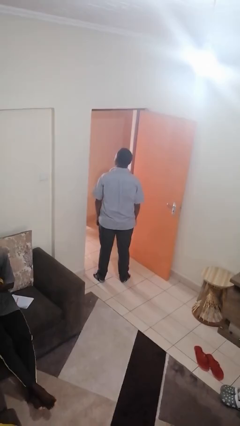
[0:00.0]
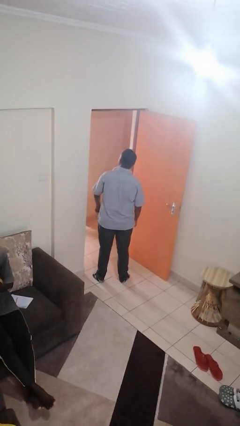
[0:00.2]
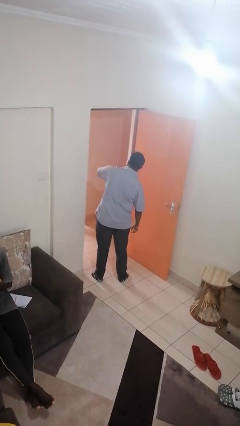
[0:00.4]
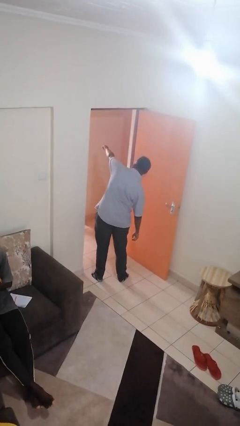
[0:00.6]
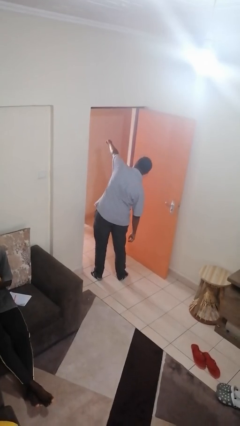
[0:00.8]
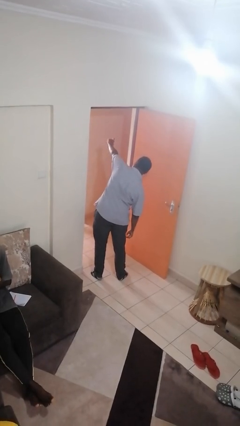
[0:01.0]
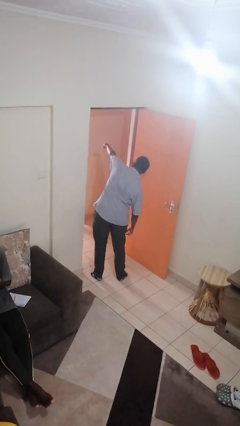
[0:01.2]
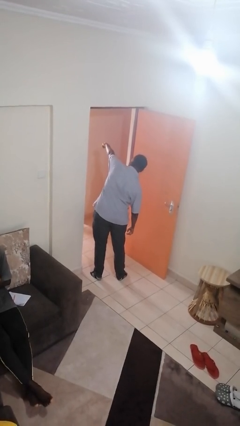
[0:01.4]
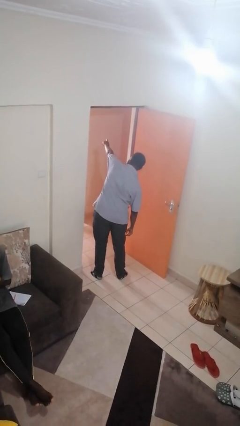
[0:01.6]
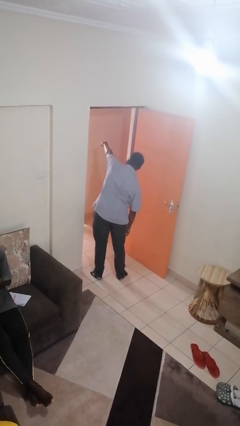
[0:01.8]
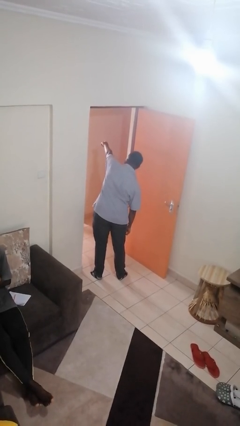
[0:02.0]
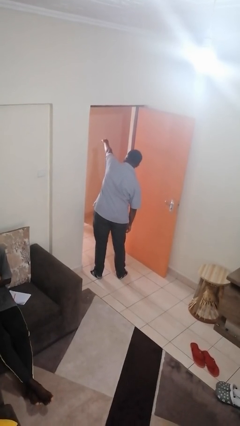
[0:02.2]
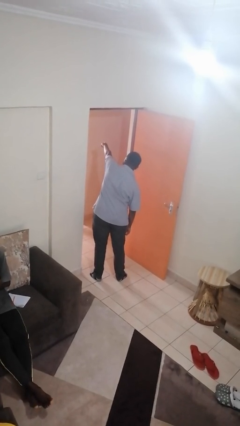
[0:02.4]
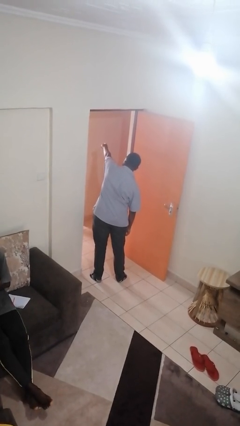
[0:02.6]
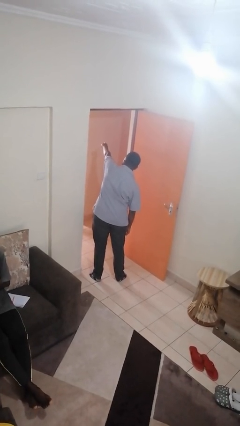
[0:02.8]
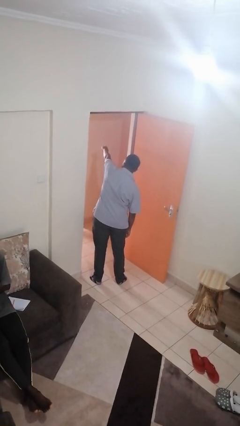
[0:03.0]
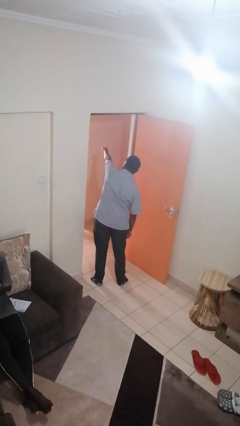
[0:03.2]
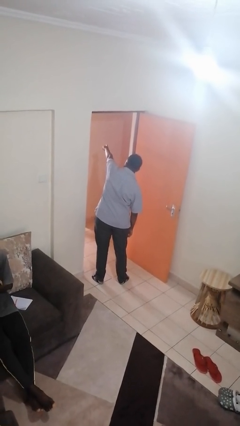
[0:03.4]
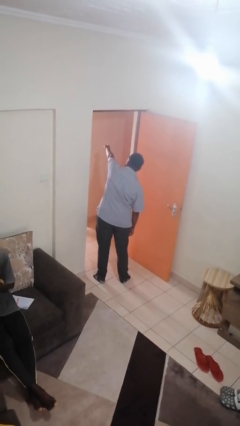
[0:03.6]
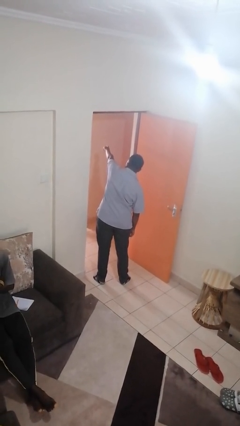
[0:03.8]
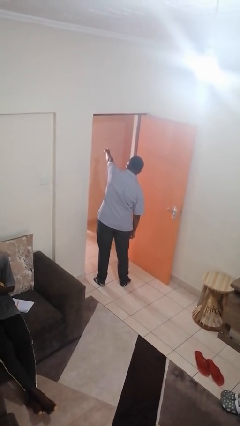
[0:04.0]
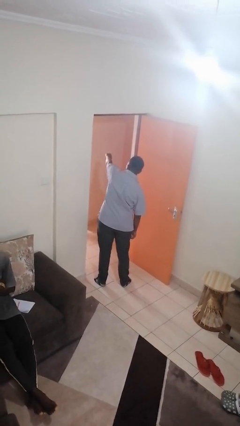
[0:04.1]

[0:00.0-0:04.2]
person points at person

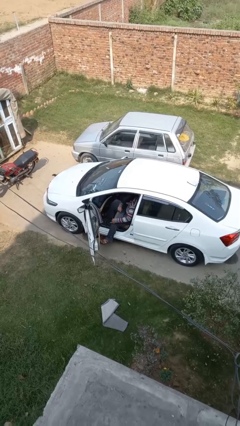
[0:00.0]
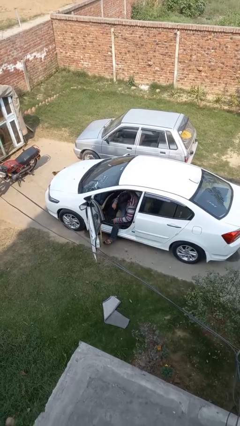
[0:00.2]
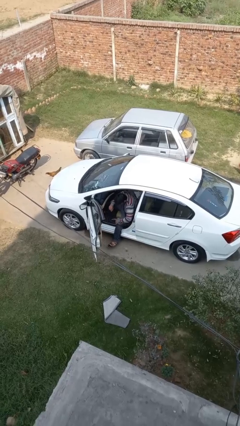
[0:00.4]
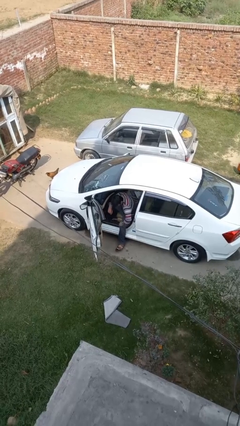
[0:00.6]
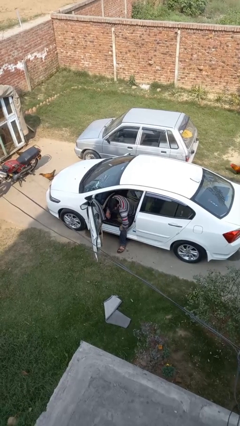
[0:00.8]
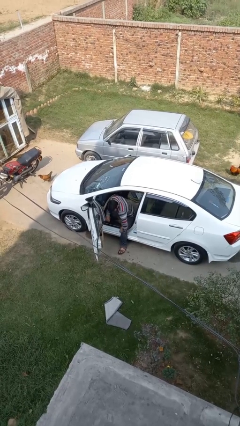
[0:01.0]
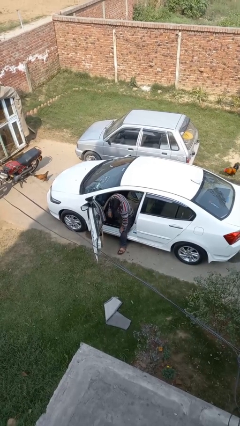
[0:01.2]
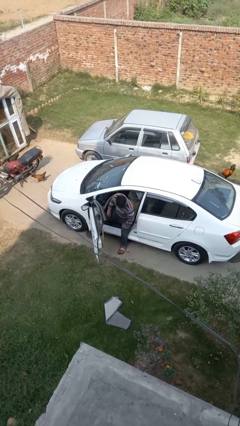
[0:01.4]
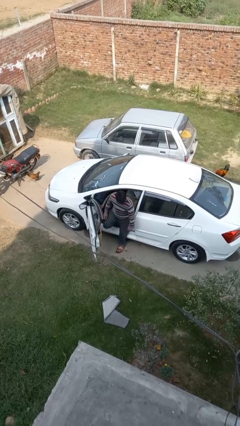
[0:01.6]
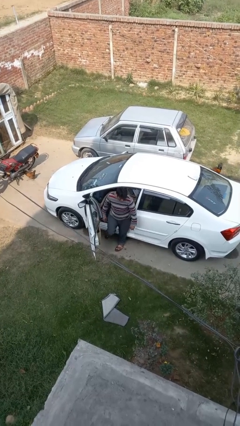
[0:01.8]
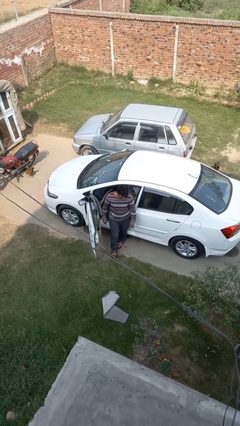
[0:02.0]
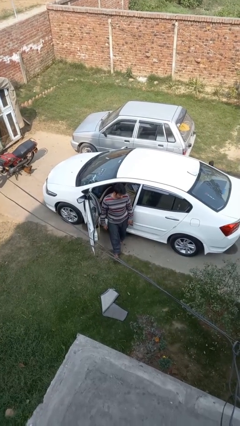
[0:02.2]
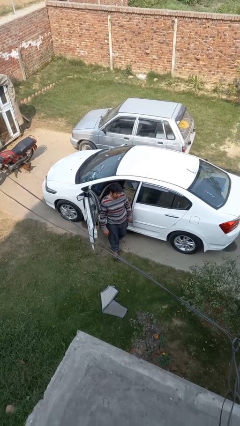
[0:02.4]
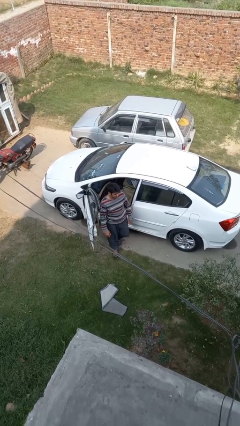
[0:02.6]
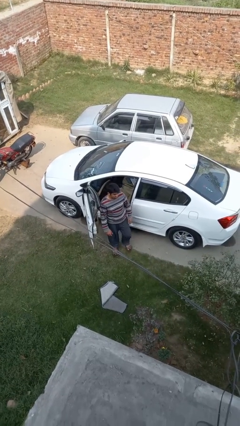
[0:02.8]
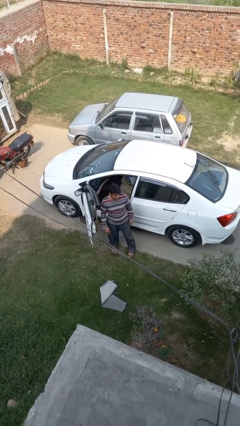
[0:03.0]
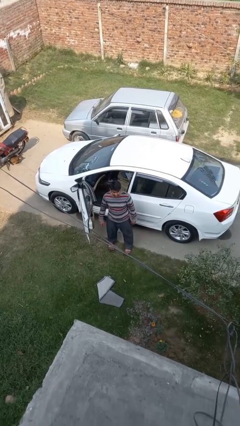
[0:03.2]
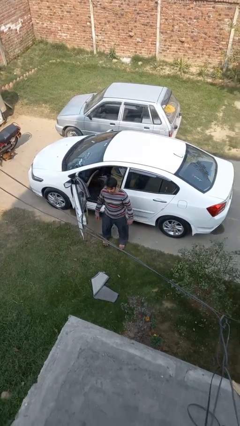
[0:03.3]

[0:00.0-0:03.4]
person exits car

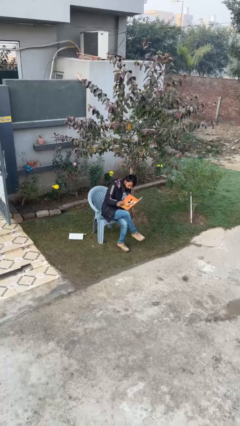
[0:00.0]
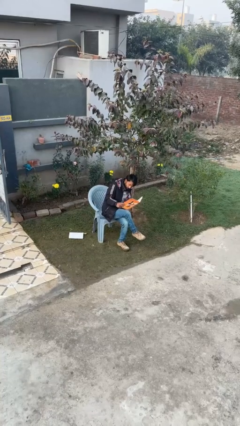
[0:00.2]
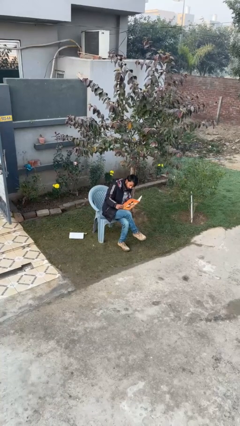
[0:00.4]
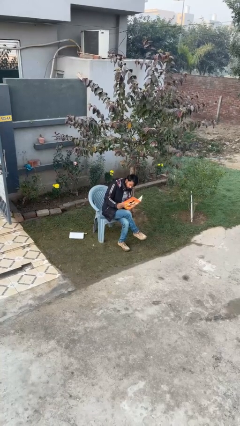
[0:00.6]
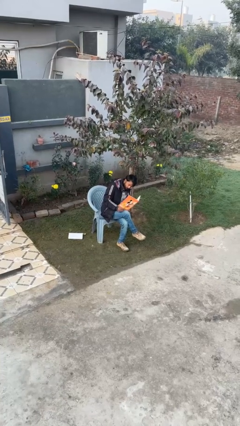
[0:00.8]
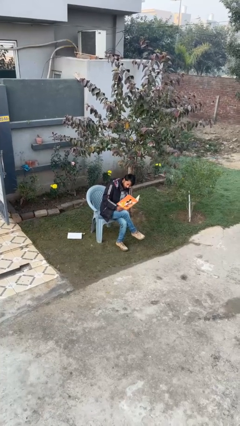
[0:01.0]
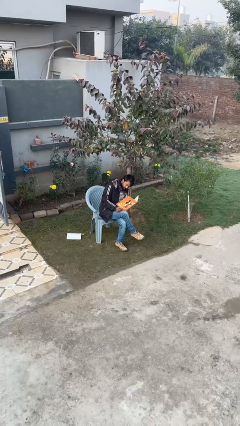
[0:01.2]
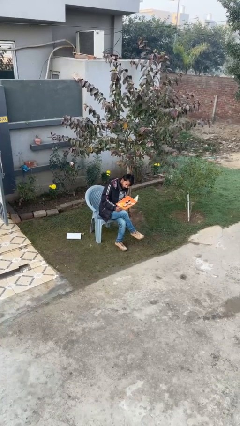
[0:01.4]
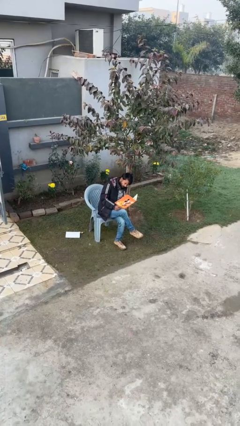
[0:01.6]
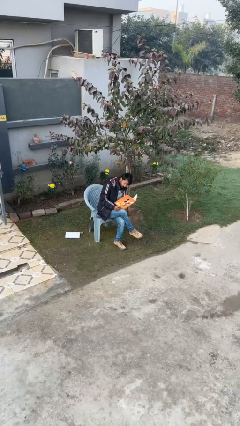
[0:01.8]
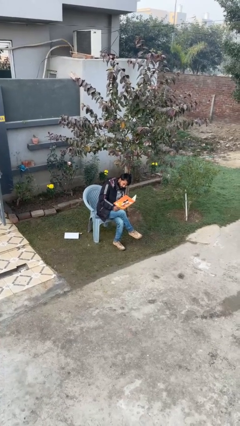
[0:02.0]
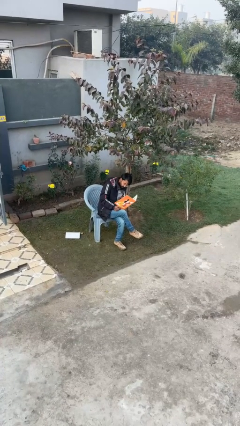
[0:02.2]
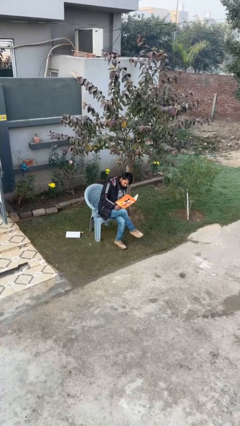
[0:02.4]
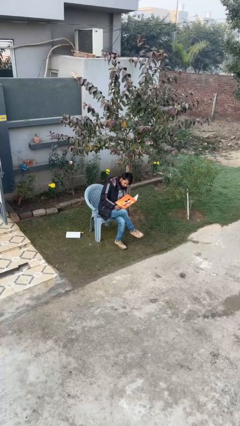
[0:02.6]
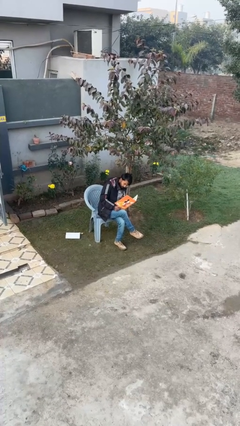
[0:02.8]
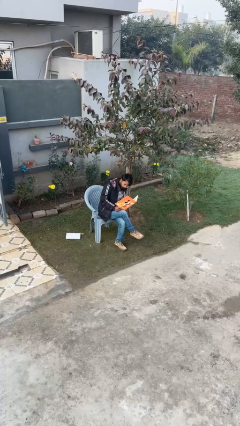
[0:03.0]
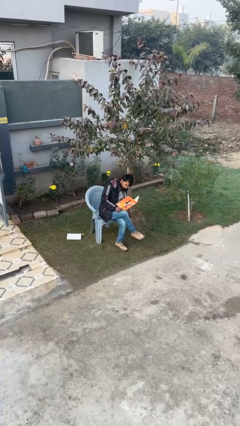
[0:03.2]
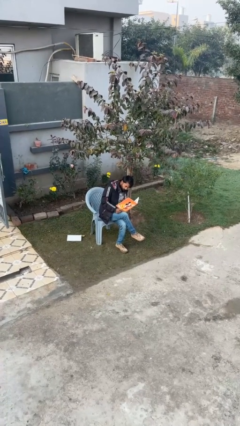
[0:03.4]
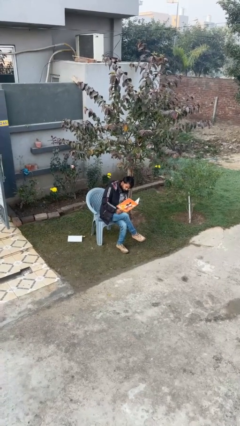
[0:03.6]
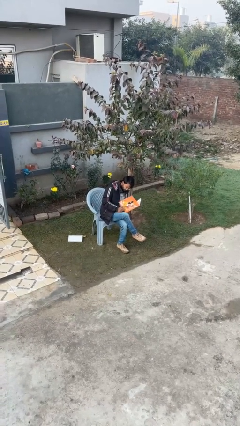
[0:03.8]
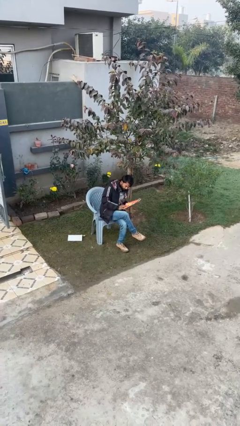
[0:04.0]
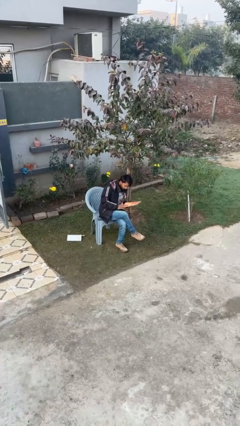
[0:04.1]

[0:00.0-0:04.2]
person reads document

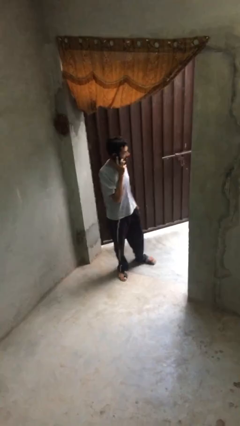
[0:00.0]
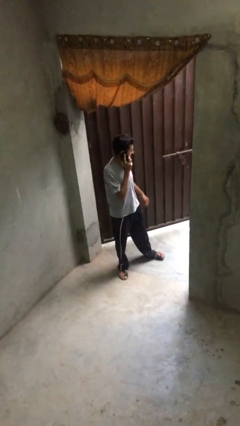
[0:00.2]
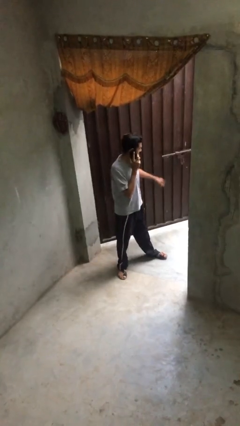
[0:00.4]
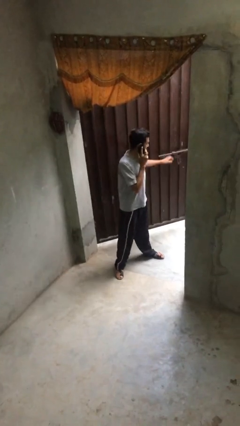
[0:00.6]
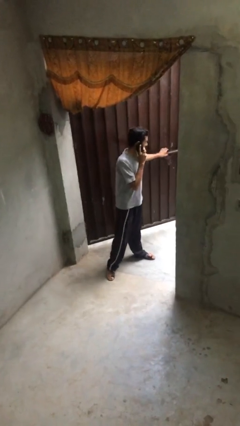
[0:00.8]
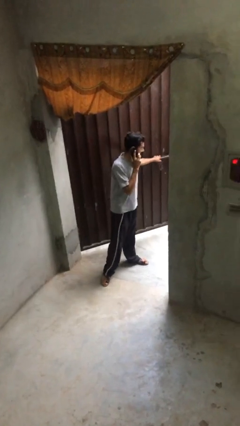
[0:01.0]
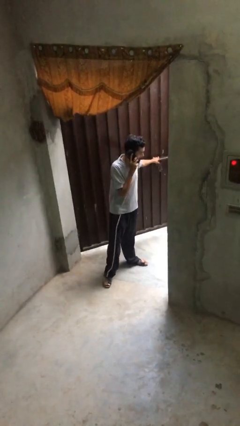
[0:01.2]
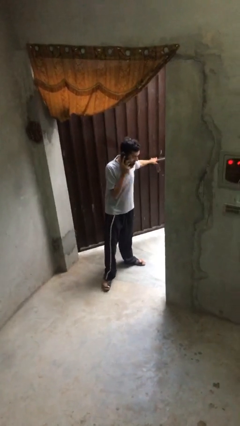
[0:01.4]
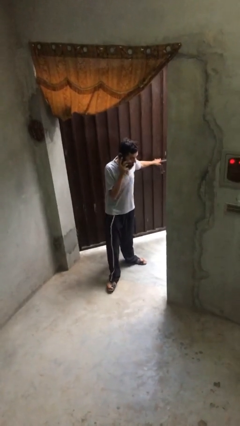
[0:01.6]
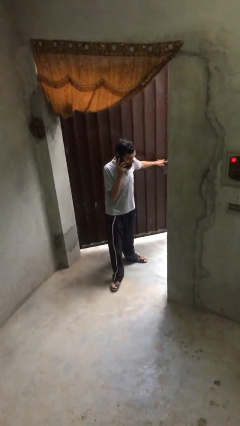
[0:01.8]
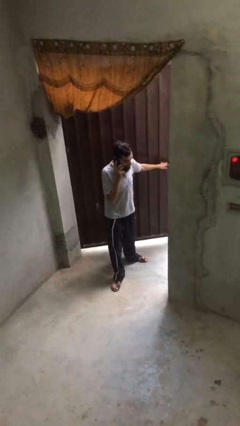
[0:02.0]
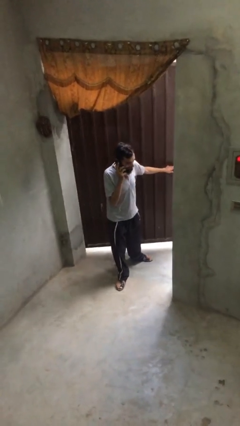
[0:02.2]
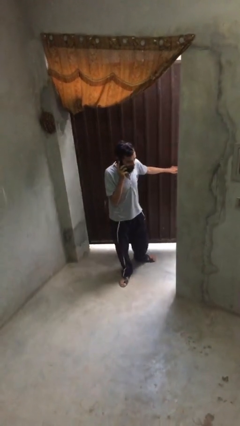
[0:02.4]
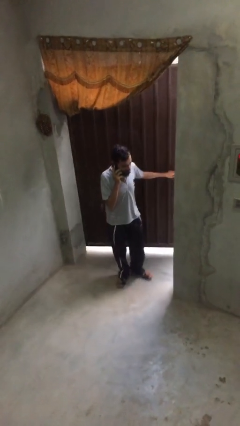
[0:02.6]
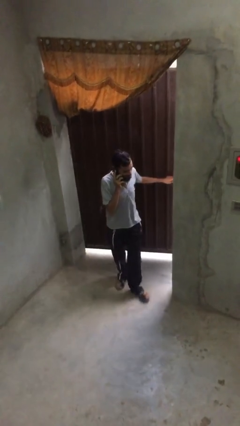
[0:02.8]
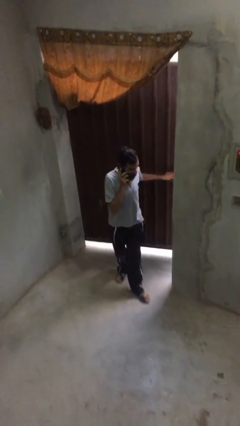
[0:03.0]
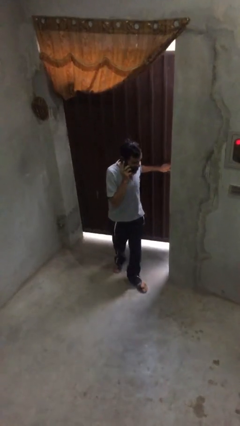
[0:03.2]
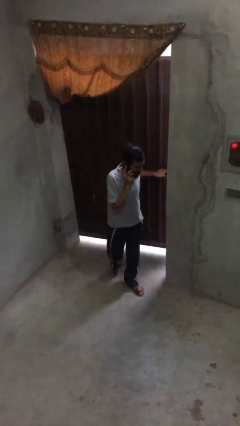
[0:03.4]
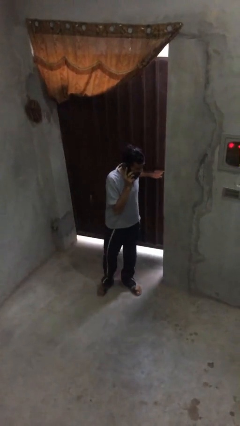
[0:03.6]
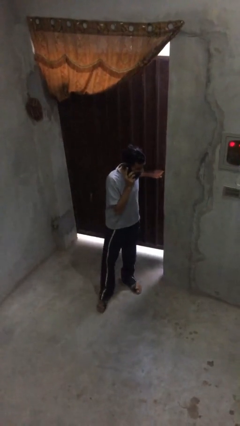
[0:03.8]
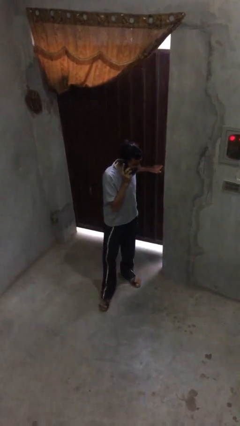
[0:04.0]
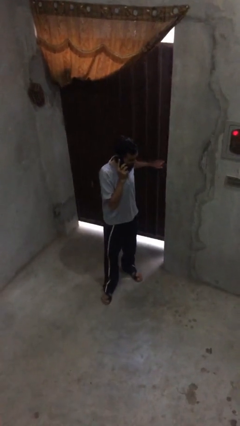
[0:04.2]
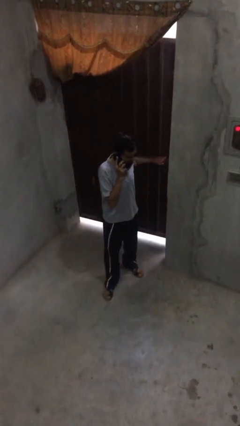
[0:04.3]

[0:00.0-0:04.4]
person closes facility door

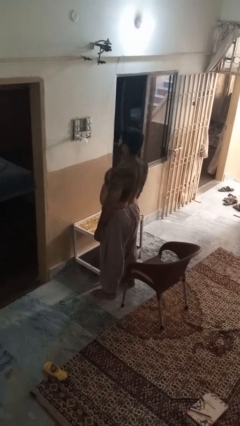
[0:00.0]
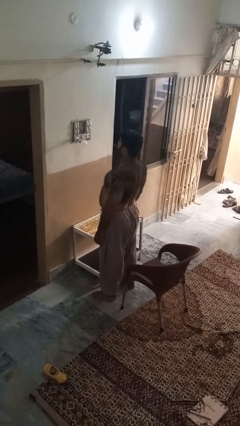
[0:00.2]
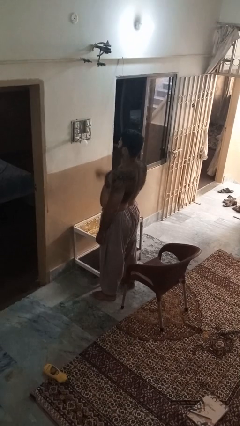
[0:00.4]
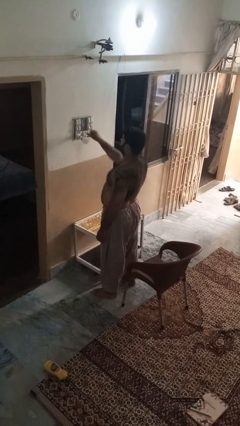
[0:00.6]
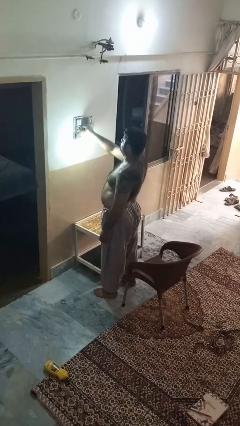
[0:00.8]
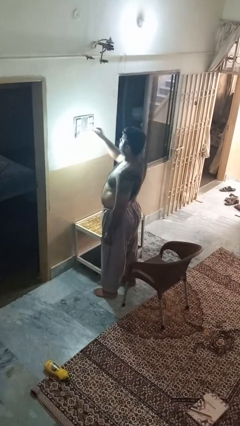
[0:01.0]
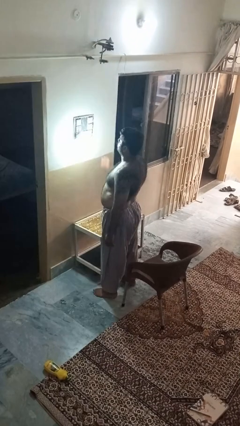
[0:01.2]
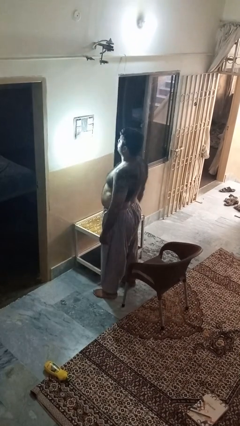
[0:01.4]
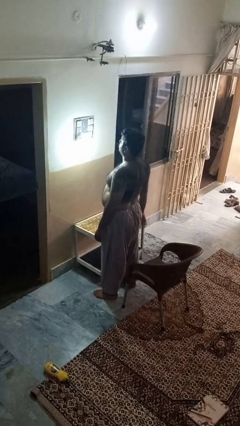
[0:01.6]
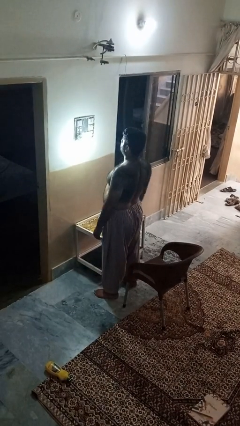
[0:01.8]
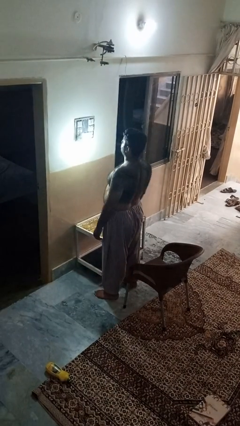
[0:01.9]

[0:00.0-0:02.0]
person turns on lamp
